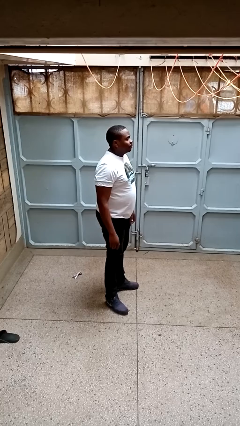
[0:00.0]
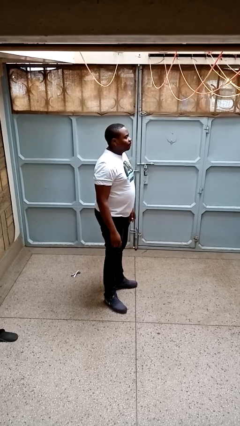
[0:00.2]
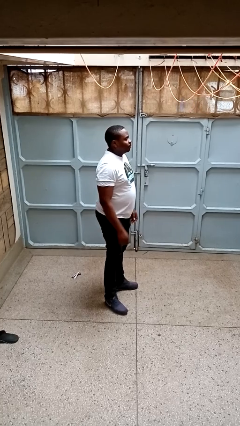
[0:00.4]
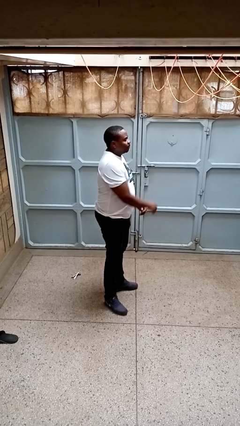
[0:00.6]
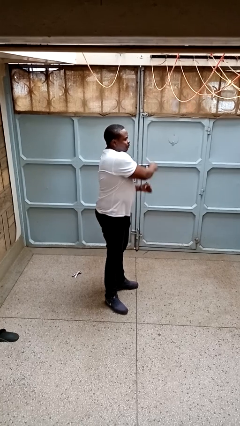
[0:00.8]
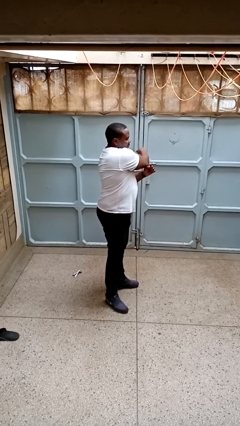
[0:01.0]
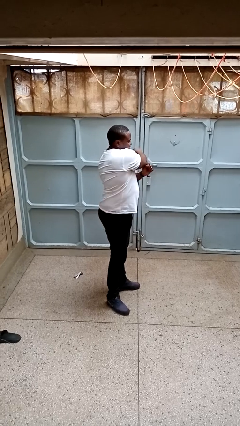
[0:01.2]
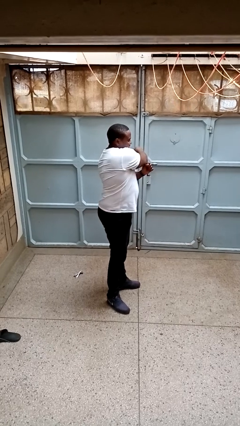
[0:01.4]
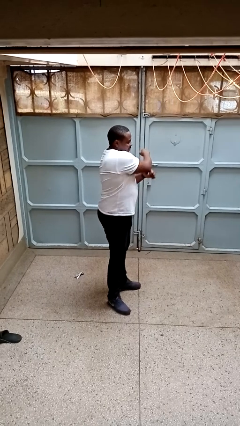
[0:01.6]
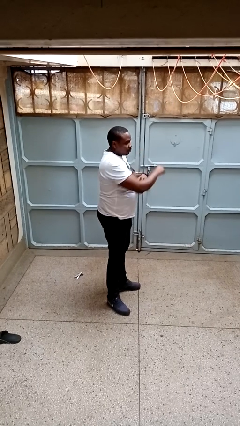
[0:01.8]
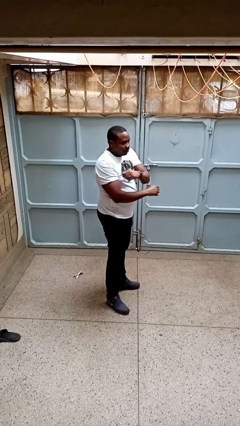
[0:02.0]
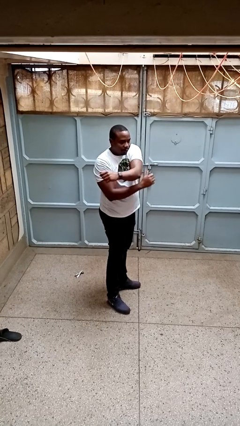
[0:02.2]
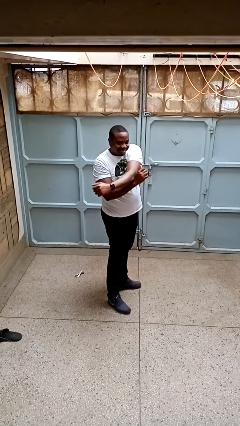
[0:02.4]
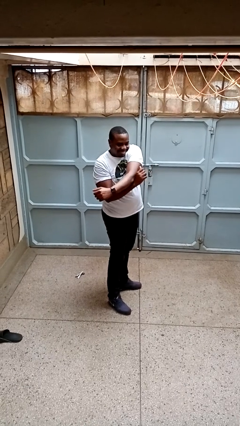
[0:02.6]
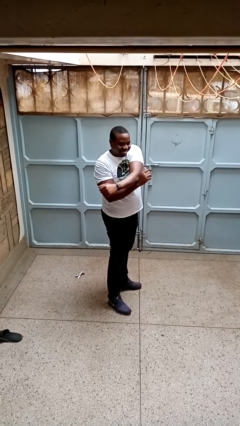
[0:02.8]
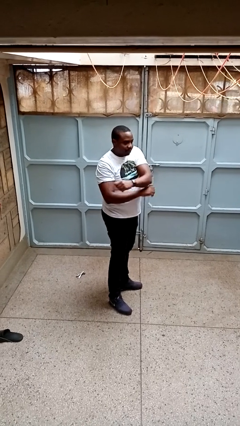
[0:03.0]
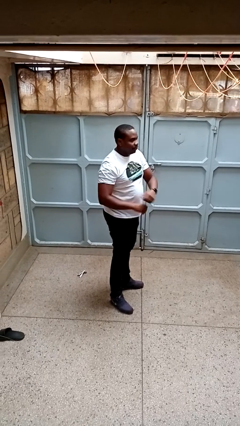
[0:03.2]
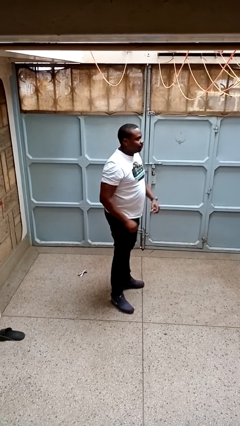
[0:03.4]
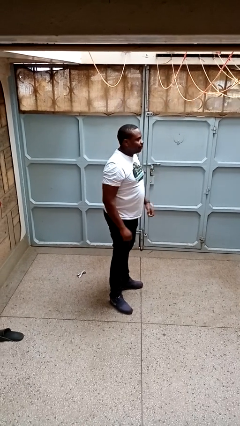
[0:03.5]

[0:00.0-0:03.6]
person stretches arms to side

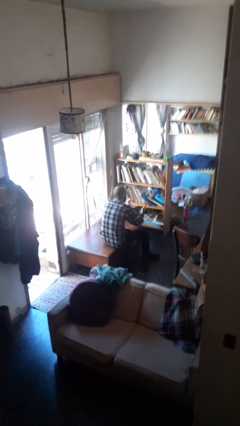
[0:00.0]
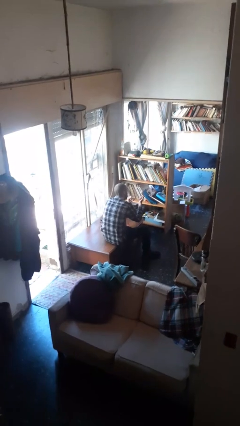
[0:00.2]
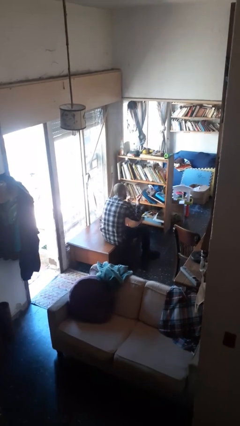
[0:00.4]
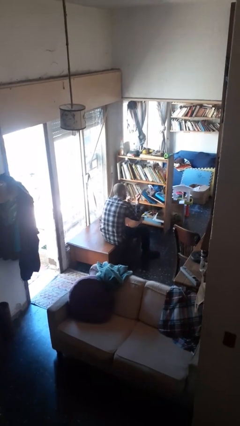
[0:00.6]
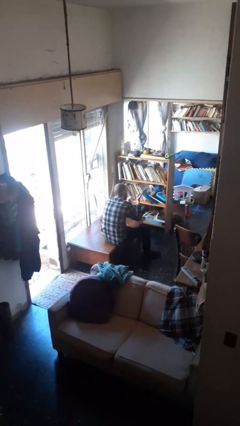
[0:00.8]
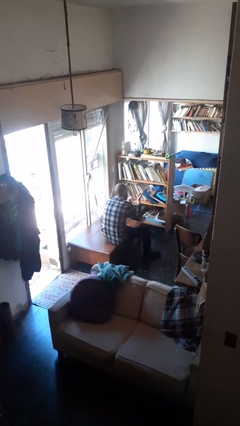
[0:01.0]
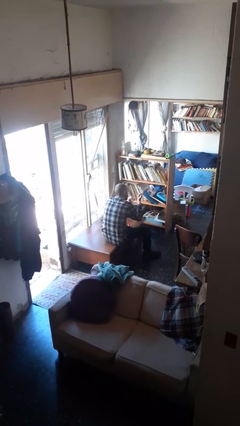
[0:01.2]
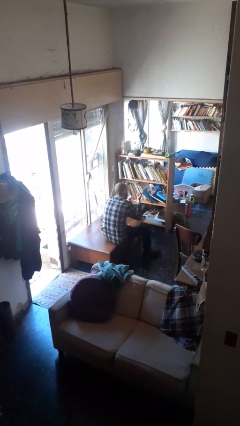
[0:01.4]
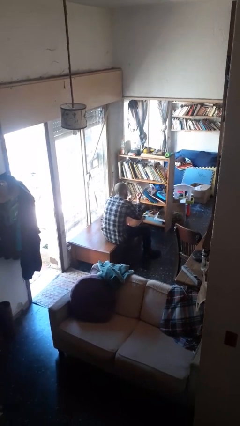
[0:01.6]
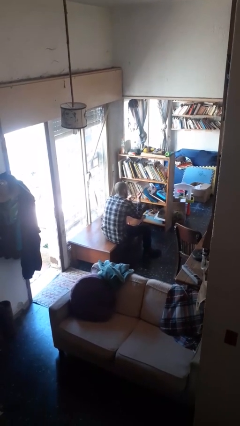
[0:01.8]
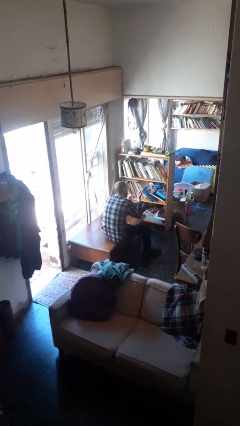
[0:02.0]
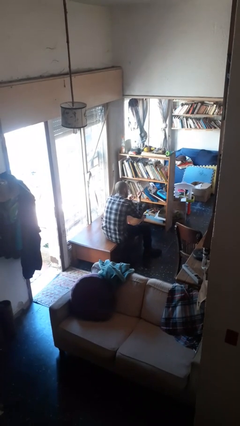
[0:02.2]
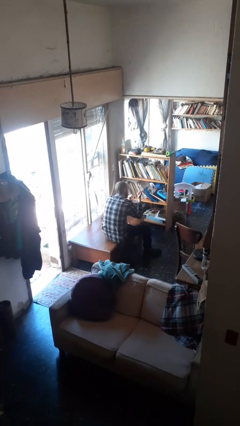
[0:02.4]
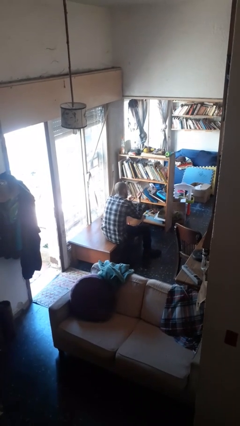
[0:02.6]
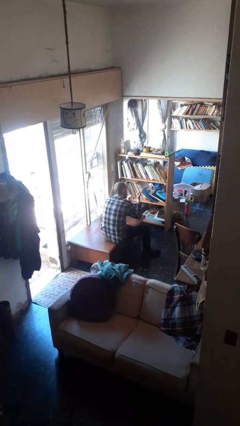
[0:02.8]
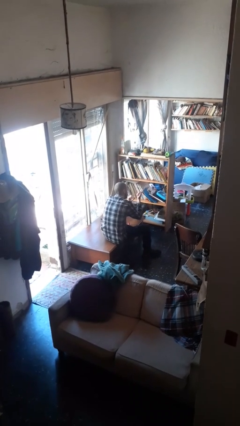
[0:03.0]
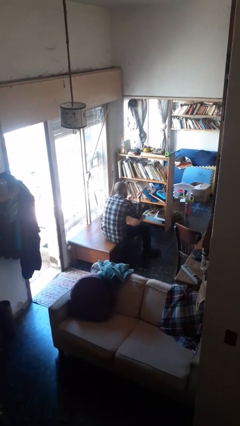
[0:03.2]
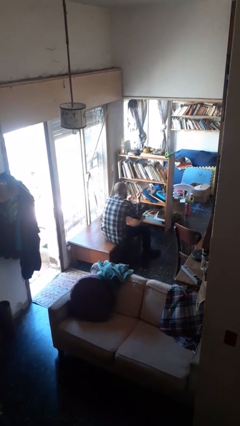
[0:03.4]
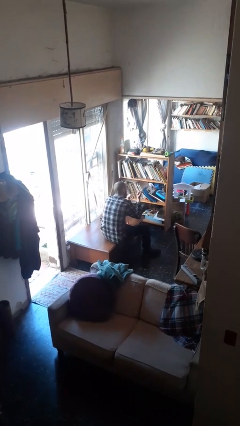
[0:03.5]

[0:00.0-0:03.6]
person paints fingernails

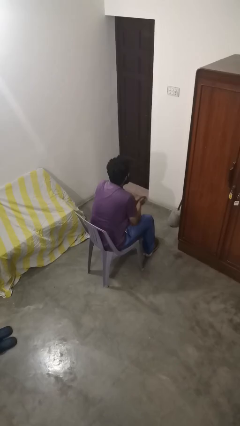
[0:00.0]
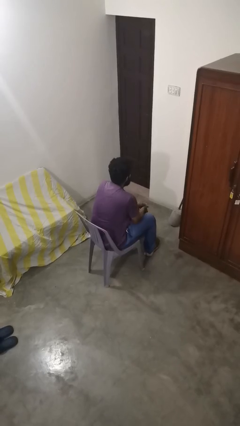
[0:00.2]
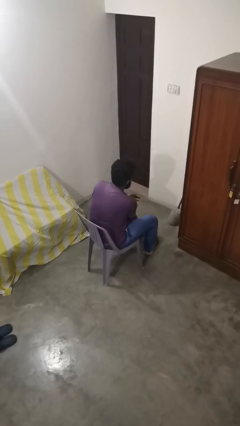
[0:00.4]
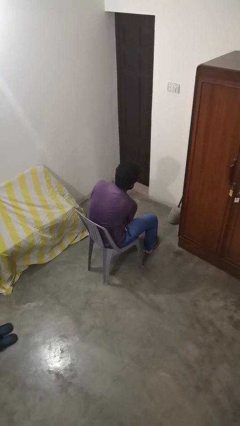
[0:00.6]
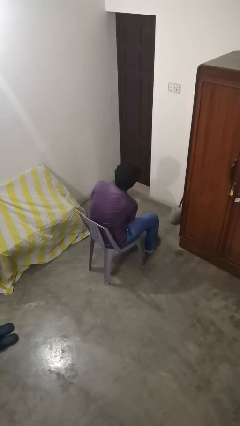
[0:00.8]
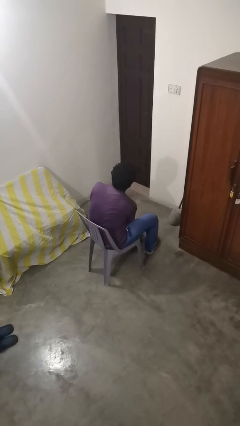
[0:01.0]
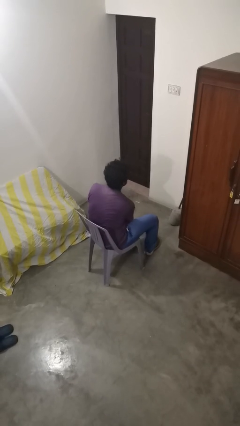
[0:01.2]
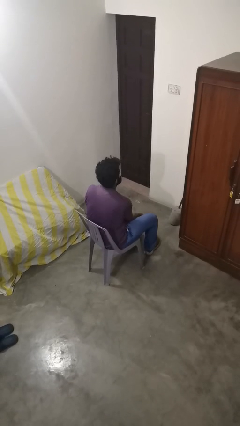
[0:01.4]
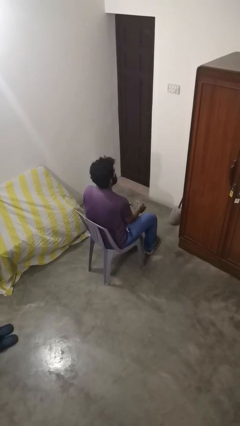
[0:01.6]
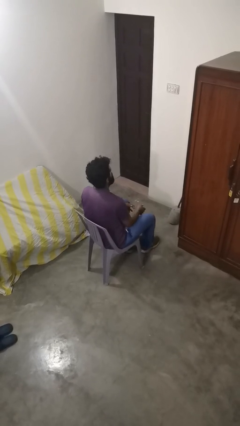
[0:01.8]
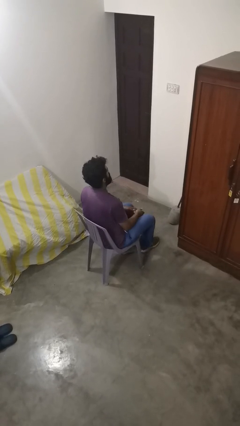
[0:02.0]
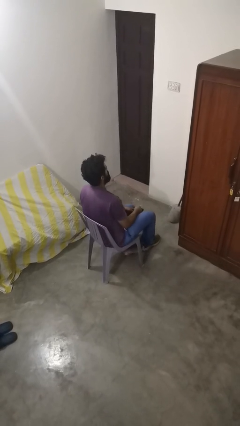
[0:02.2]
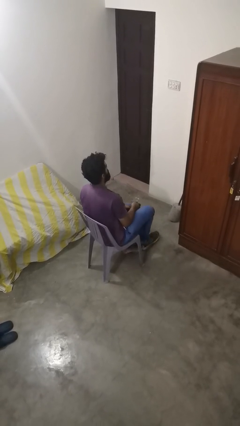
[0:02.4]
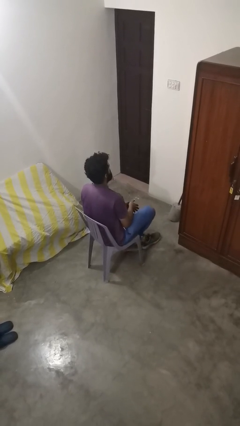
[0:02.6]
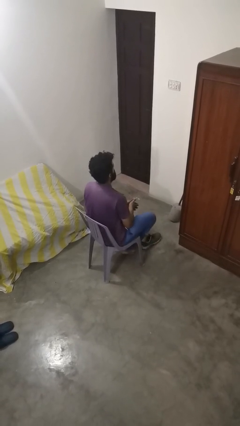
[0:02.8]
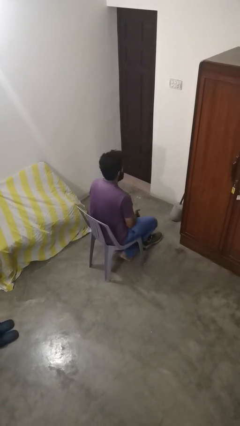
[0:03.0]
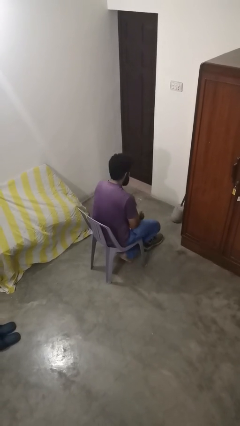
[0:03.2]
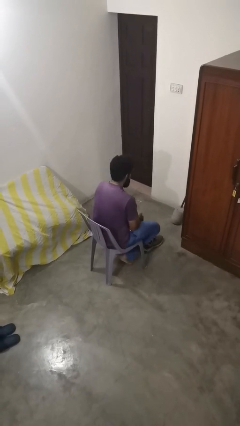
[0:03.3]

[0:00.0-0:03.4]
person takes off shoes

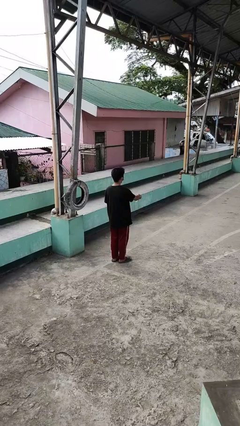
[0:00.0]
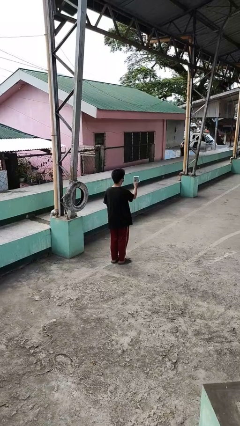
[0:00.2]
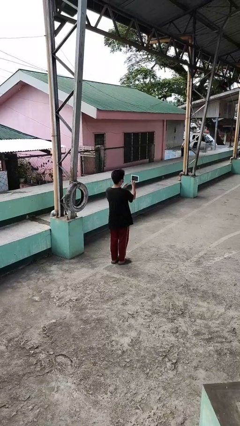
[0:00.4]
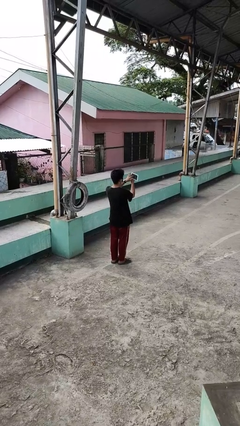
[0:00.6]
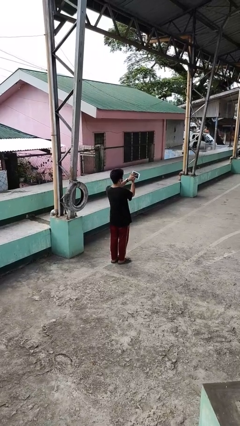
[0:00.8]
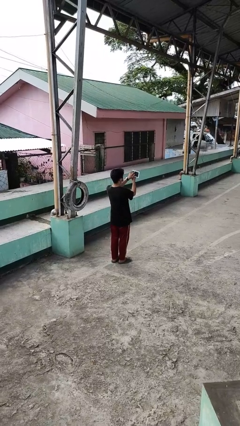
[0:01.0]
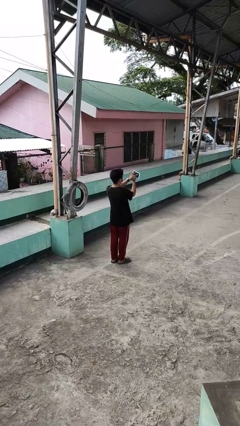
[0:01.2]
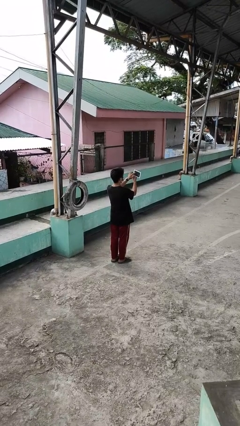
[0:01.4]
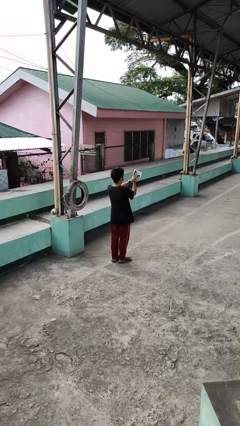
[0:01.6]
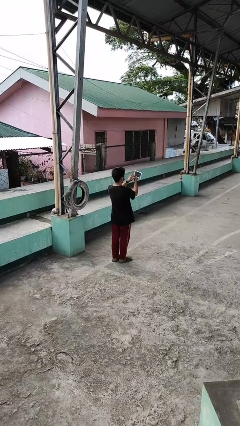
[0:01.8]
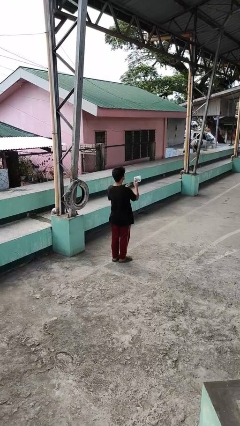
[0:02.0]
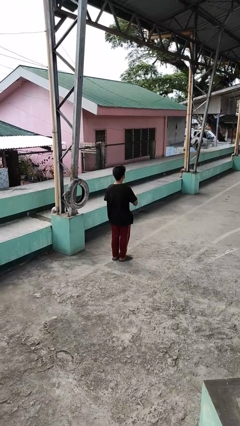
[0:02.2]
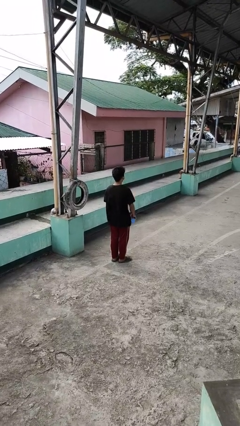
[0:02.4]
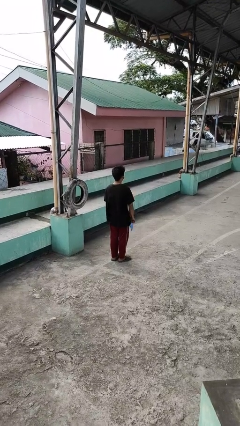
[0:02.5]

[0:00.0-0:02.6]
person interacts with tablet

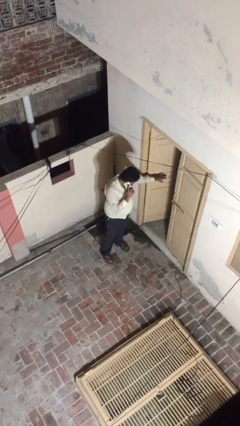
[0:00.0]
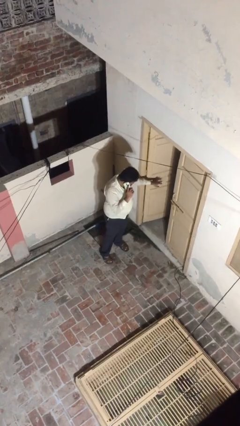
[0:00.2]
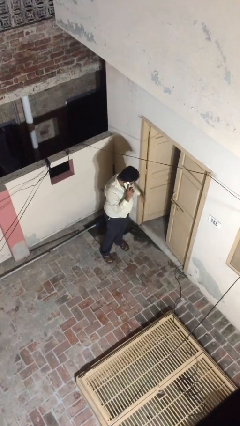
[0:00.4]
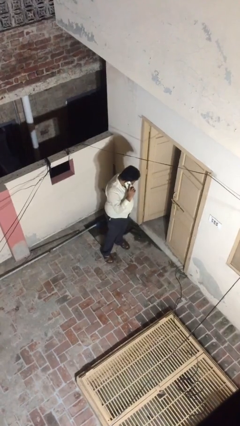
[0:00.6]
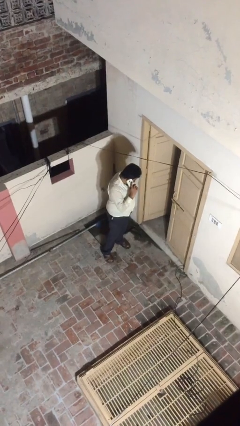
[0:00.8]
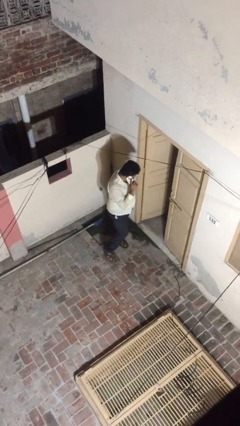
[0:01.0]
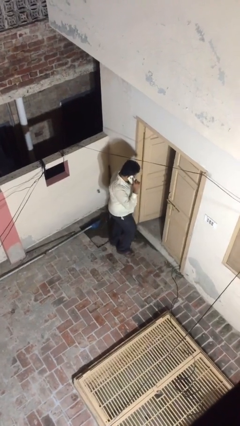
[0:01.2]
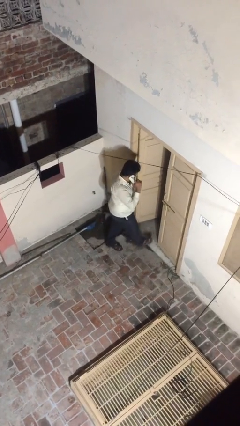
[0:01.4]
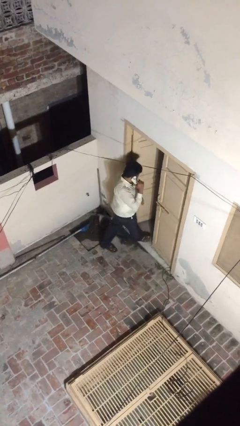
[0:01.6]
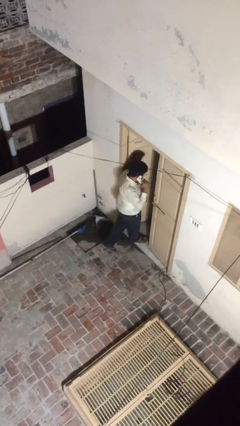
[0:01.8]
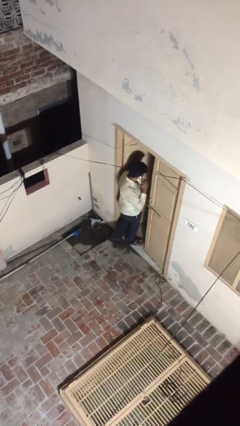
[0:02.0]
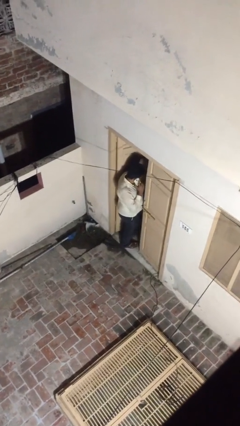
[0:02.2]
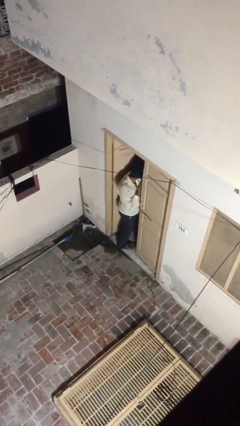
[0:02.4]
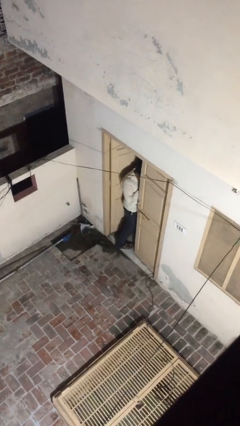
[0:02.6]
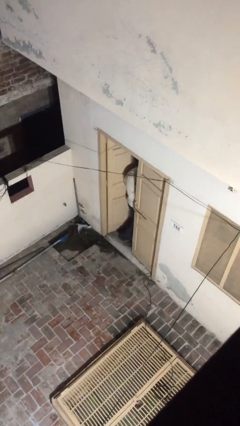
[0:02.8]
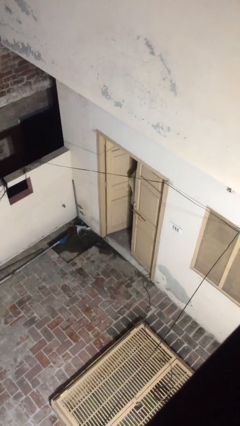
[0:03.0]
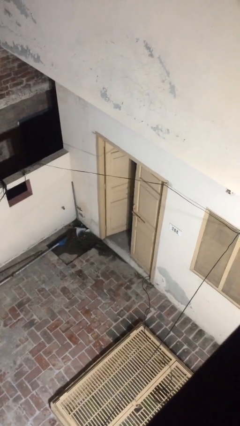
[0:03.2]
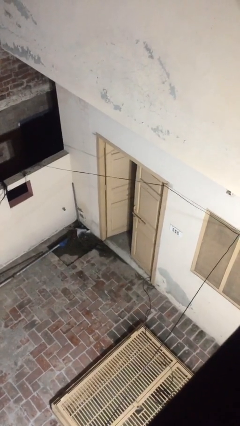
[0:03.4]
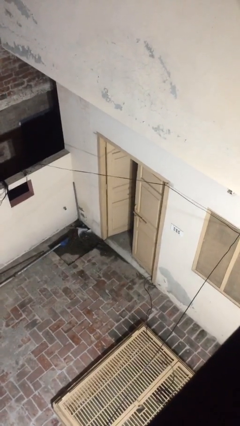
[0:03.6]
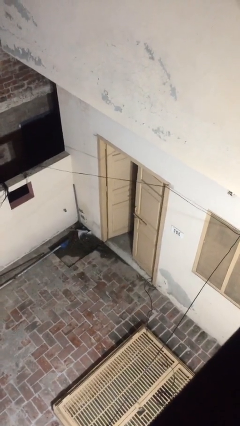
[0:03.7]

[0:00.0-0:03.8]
person exits scene through structure

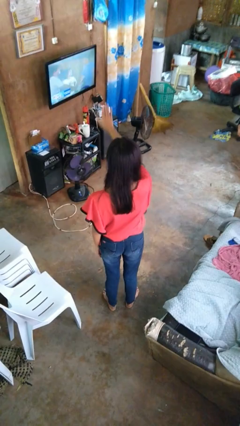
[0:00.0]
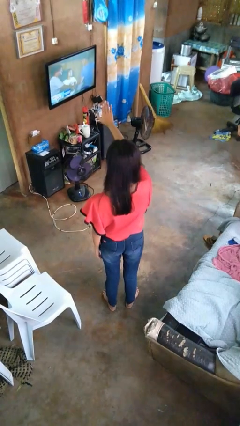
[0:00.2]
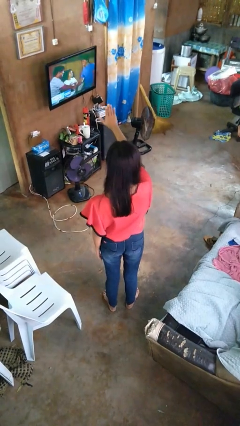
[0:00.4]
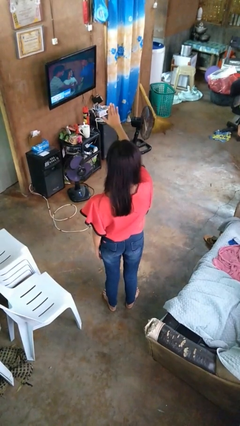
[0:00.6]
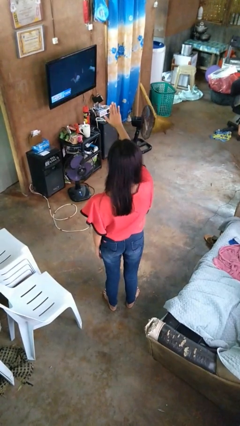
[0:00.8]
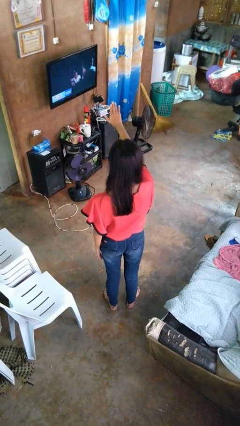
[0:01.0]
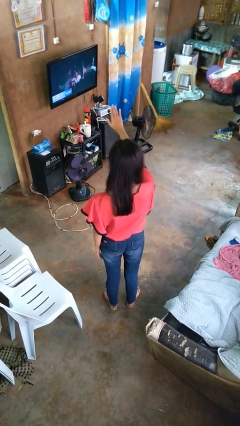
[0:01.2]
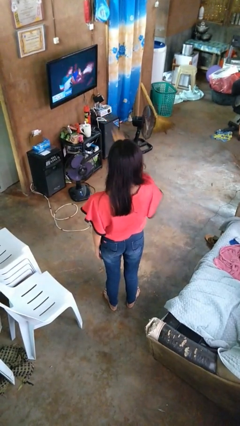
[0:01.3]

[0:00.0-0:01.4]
person gestures stop
